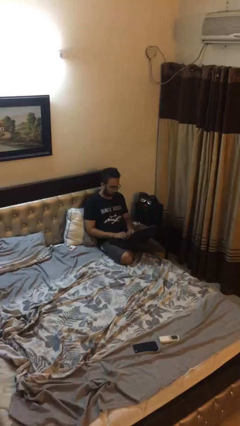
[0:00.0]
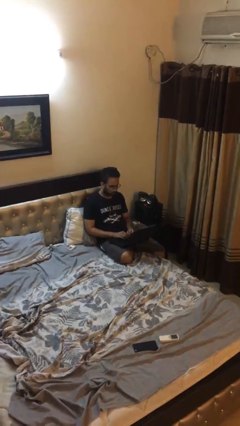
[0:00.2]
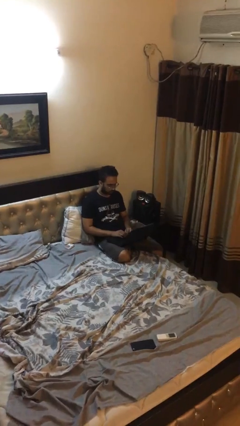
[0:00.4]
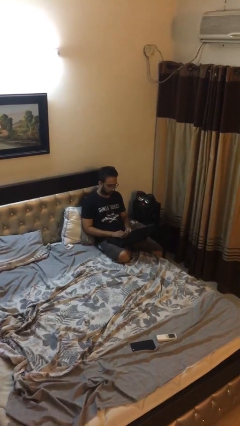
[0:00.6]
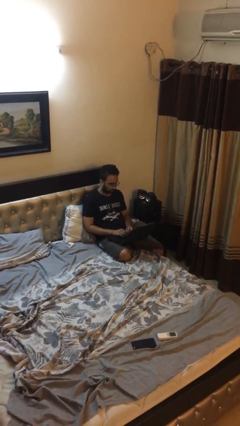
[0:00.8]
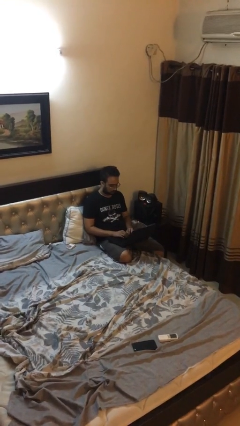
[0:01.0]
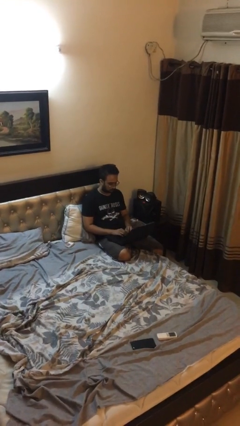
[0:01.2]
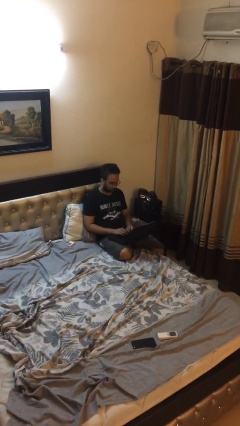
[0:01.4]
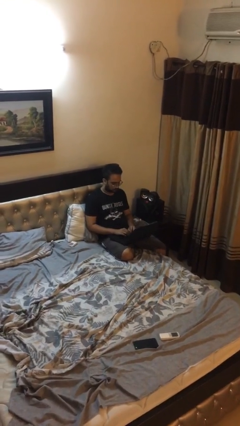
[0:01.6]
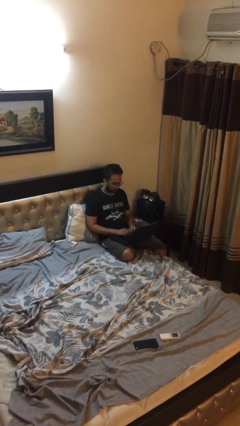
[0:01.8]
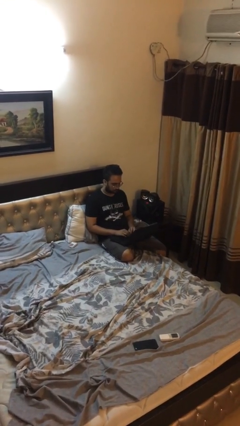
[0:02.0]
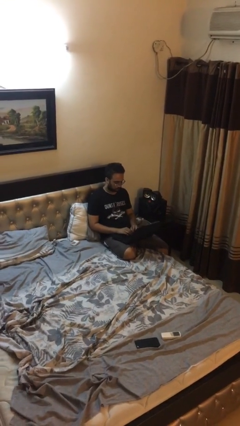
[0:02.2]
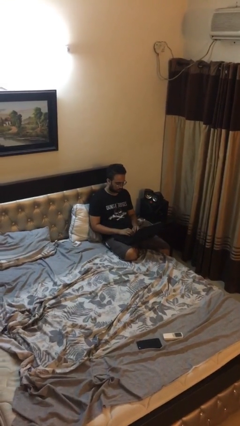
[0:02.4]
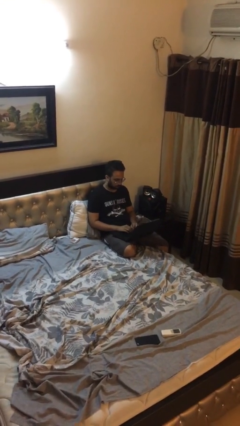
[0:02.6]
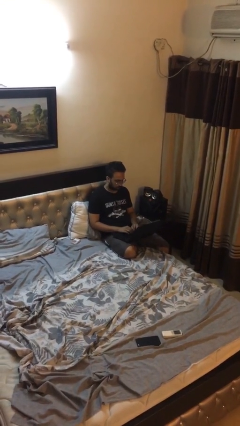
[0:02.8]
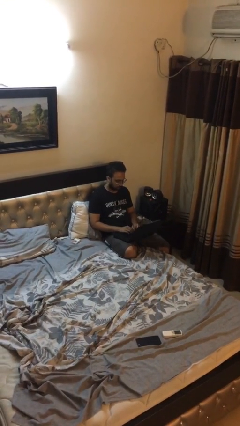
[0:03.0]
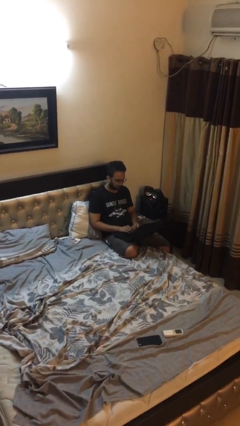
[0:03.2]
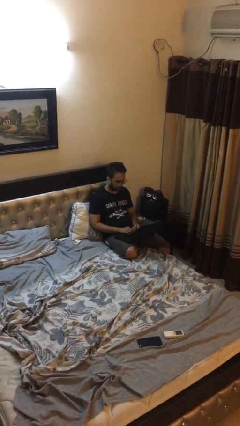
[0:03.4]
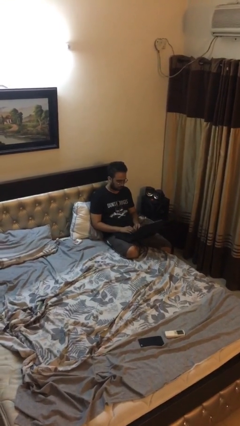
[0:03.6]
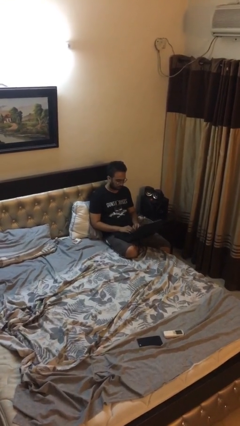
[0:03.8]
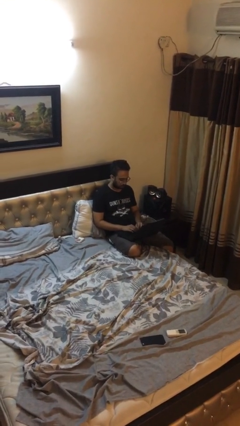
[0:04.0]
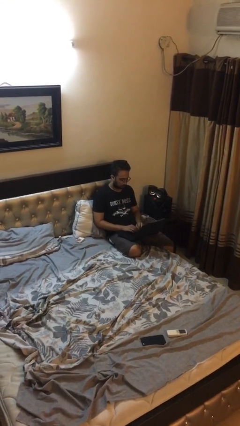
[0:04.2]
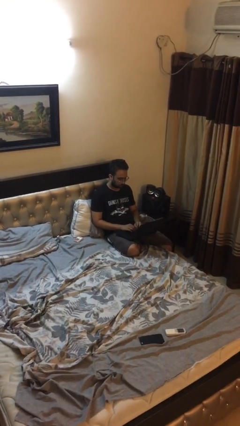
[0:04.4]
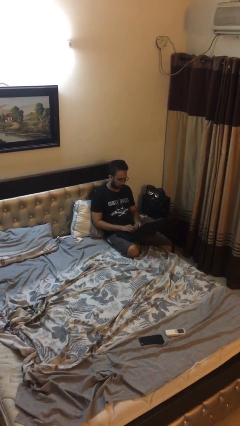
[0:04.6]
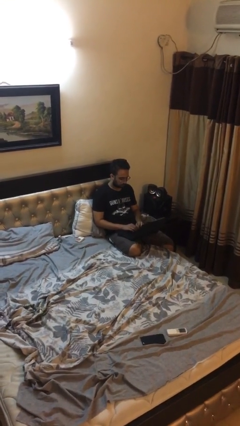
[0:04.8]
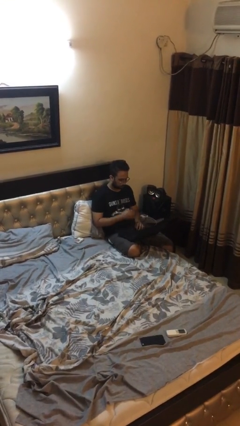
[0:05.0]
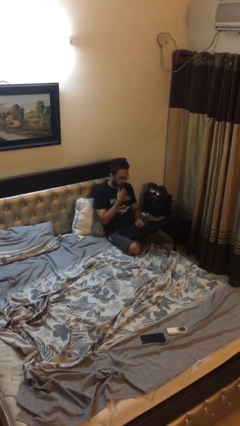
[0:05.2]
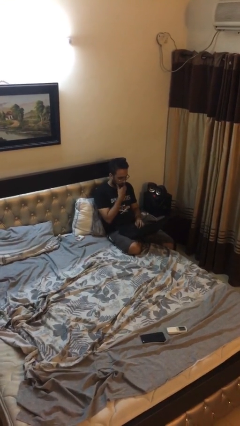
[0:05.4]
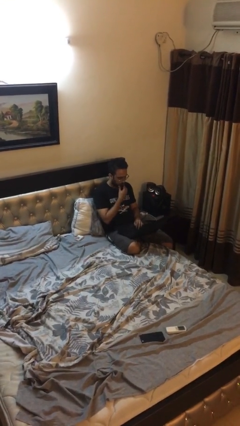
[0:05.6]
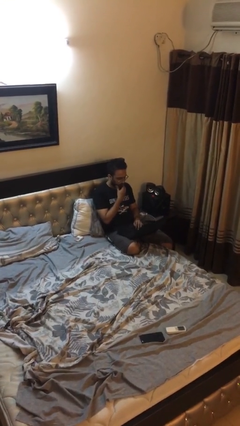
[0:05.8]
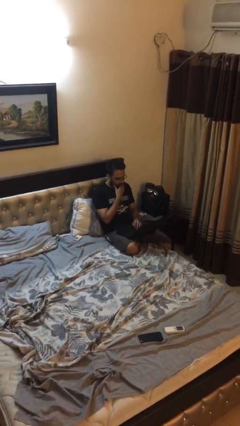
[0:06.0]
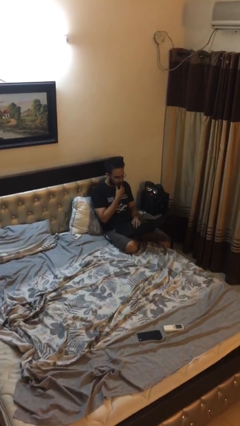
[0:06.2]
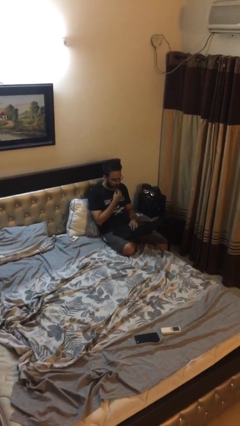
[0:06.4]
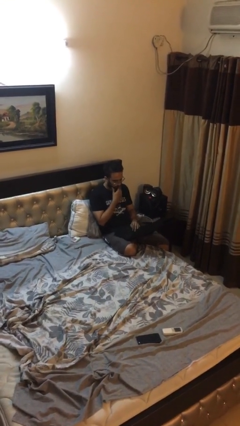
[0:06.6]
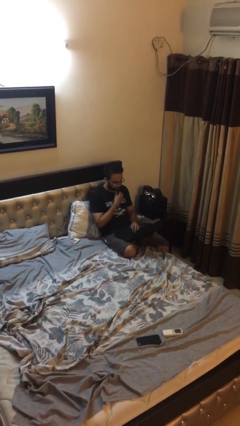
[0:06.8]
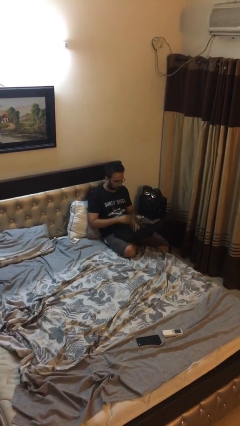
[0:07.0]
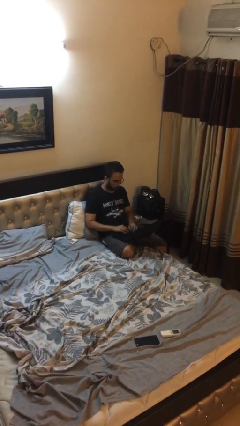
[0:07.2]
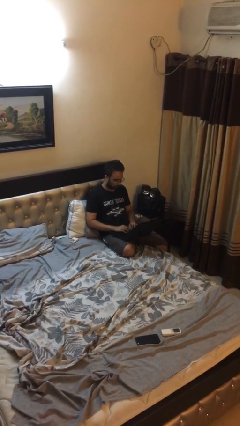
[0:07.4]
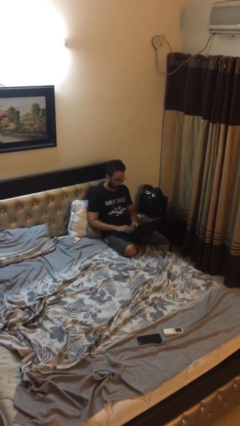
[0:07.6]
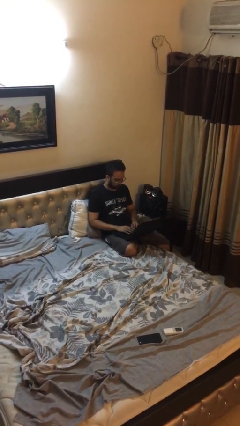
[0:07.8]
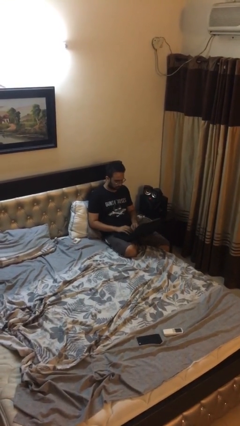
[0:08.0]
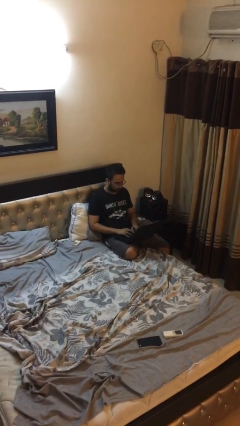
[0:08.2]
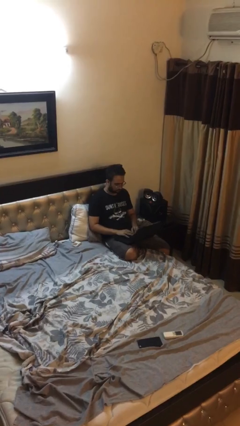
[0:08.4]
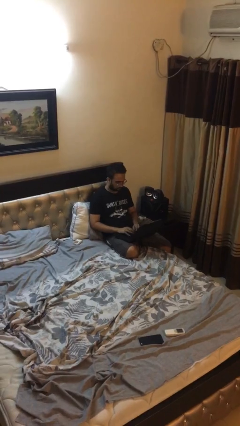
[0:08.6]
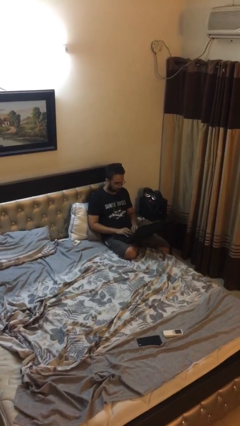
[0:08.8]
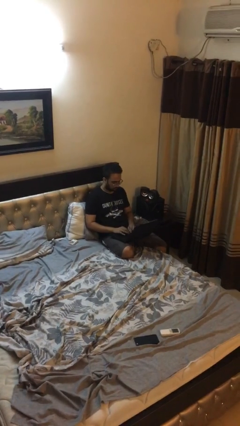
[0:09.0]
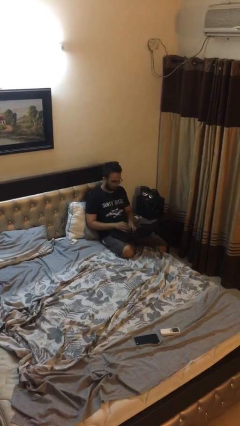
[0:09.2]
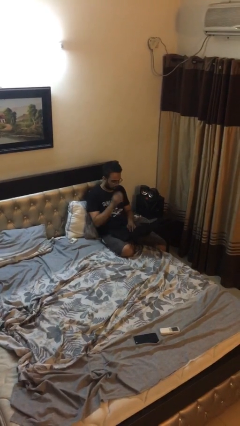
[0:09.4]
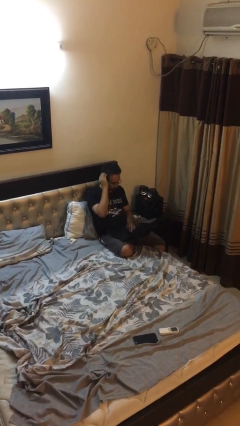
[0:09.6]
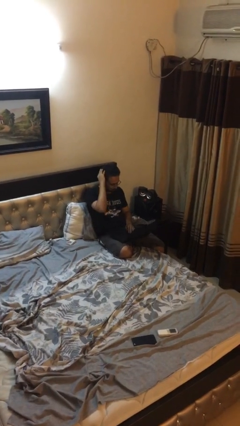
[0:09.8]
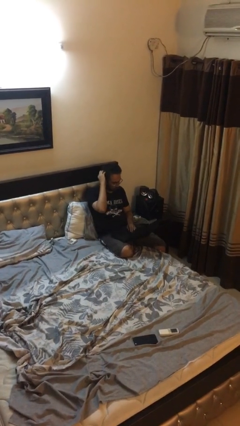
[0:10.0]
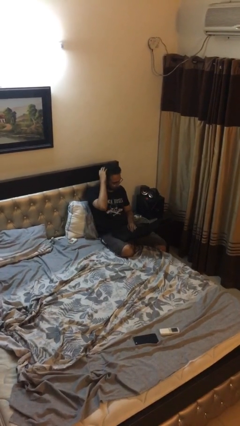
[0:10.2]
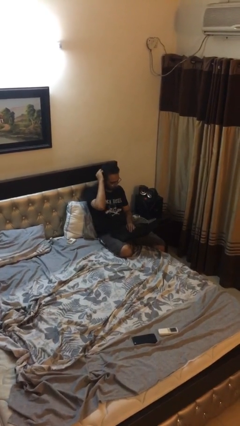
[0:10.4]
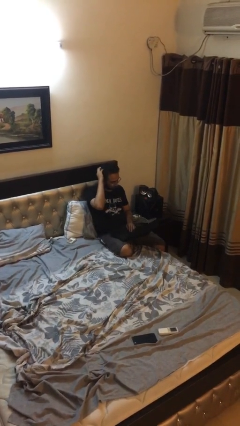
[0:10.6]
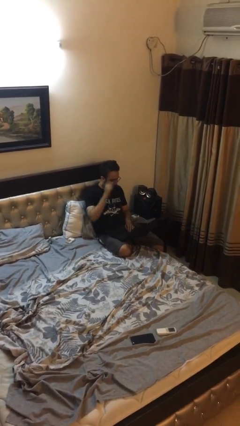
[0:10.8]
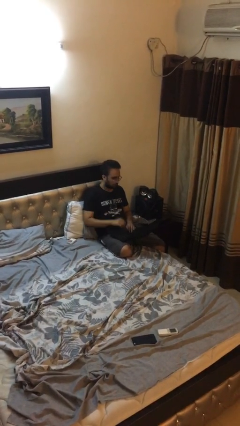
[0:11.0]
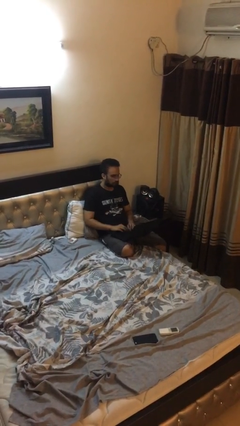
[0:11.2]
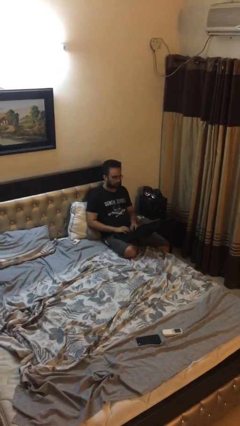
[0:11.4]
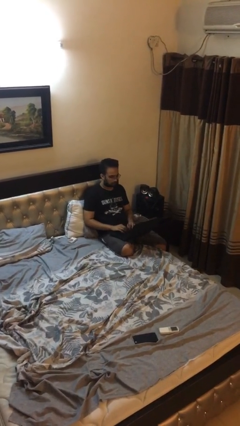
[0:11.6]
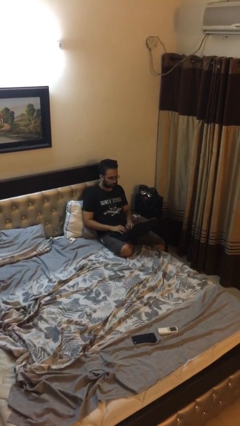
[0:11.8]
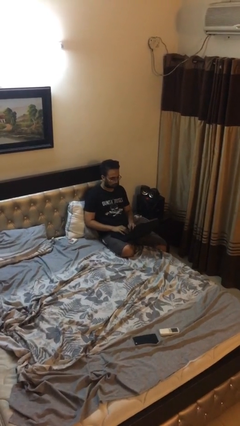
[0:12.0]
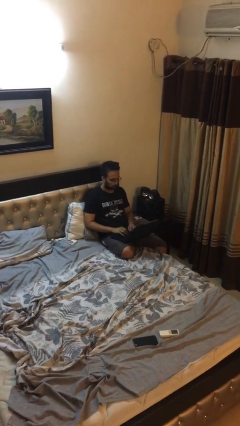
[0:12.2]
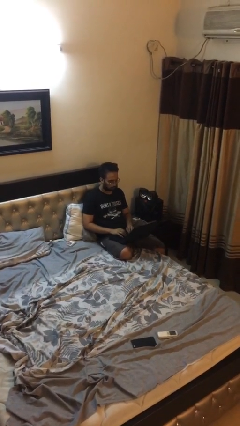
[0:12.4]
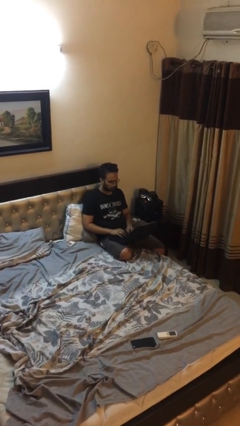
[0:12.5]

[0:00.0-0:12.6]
person interacts with laptop

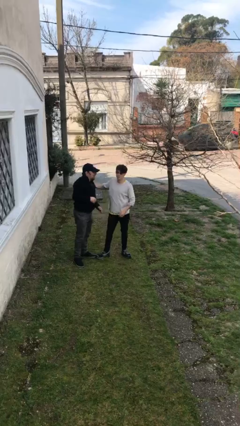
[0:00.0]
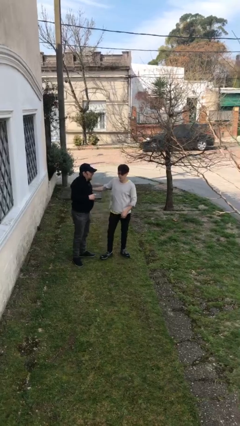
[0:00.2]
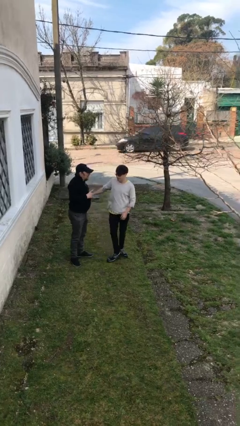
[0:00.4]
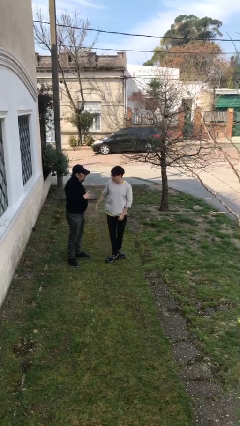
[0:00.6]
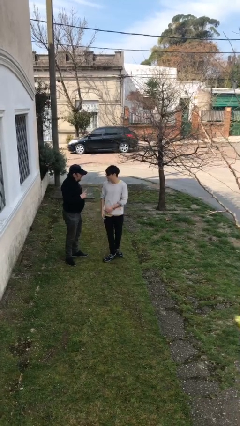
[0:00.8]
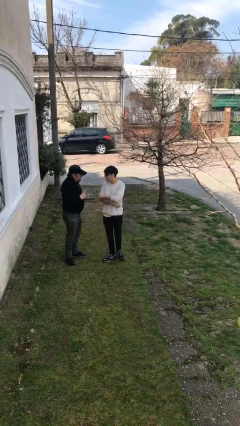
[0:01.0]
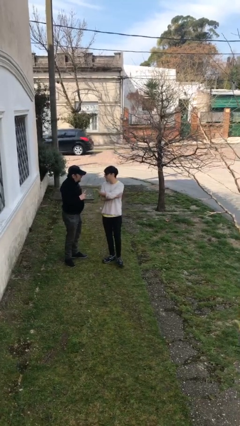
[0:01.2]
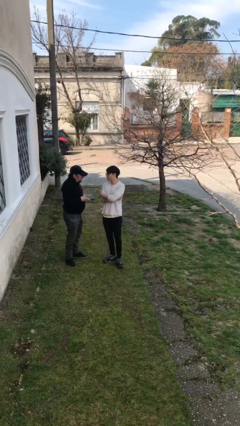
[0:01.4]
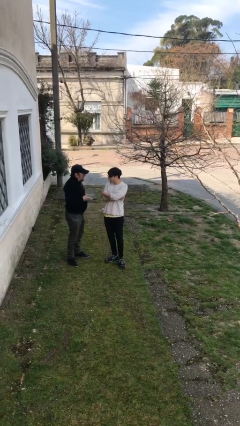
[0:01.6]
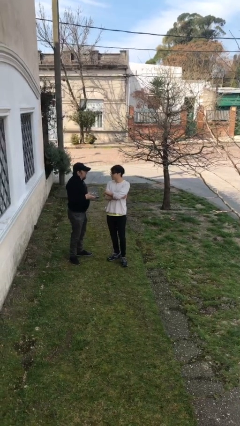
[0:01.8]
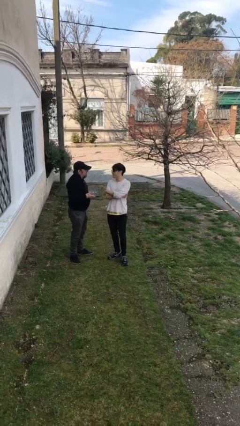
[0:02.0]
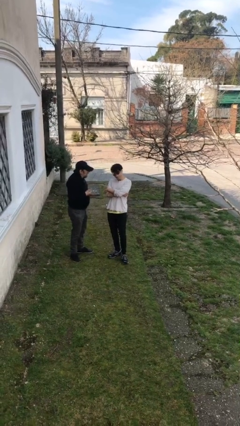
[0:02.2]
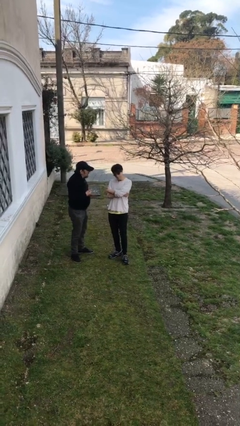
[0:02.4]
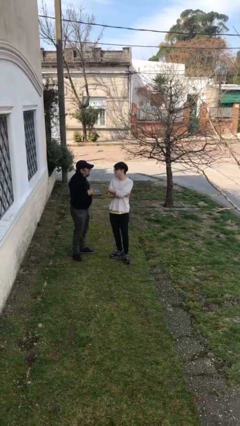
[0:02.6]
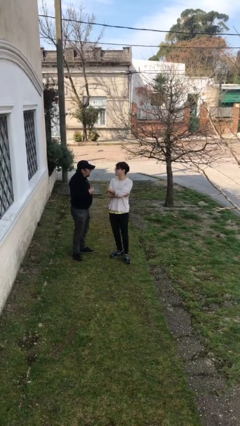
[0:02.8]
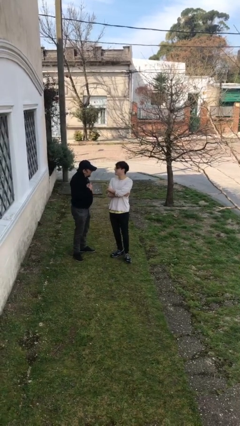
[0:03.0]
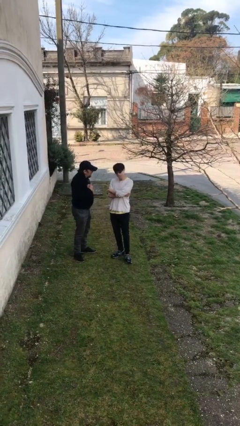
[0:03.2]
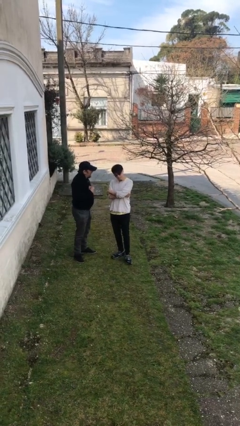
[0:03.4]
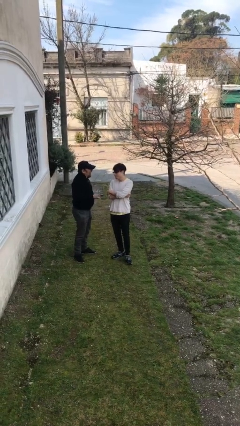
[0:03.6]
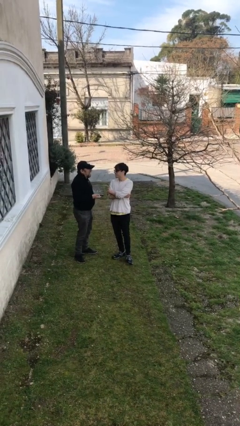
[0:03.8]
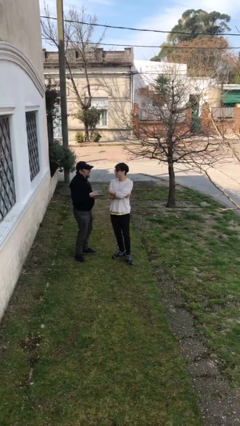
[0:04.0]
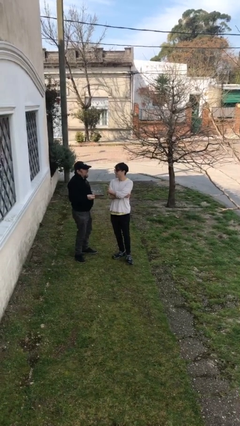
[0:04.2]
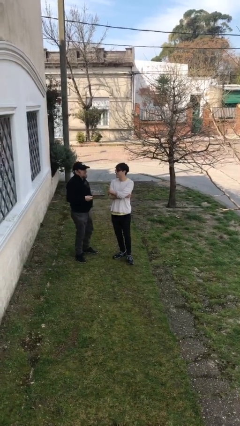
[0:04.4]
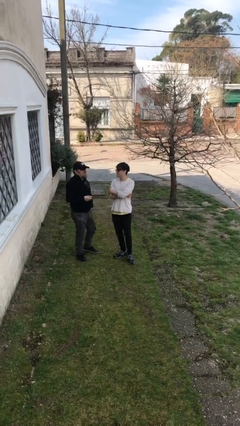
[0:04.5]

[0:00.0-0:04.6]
person talks to person

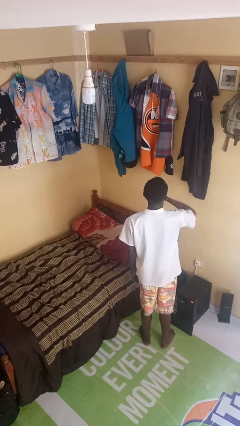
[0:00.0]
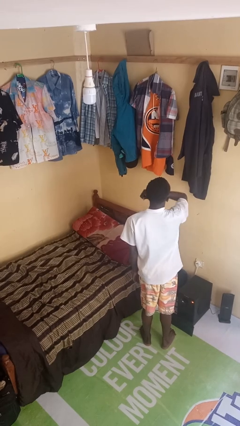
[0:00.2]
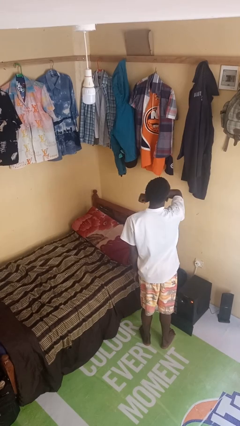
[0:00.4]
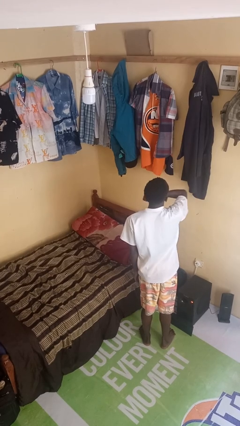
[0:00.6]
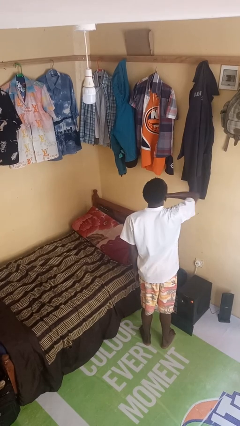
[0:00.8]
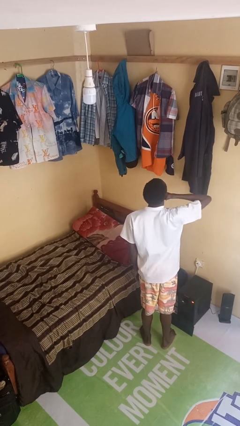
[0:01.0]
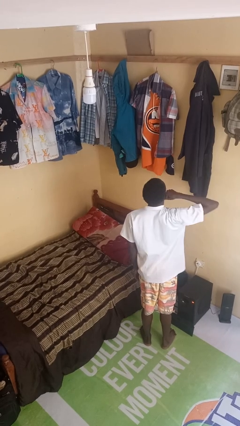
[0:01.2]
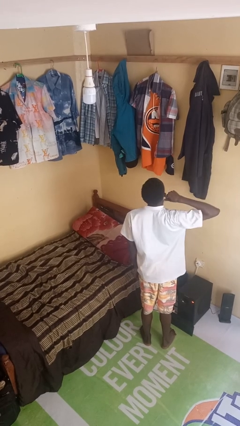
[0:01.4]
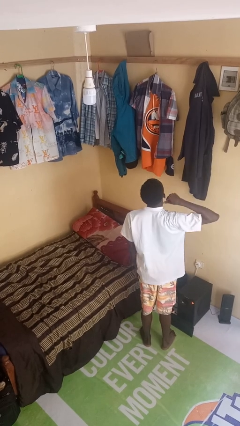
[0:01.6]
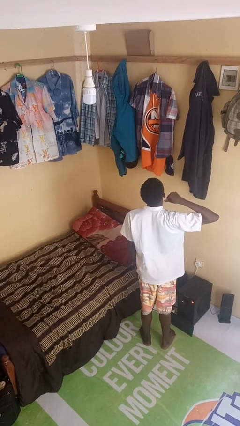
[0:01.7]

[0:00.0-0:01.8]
person gestures cut
